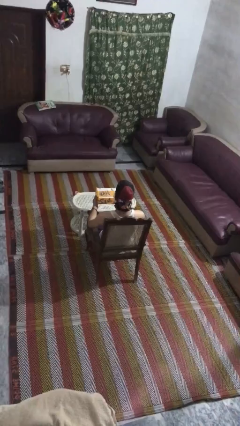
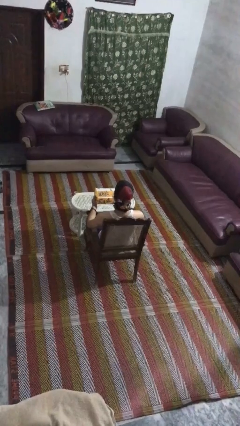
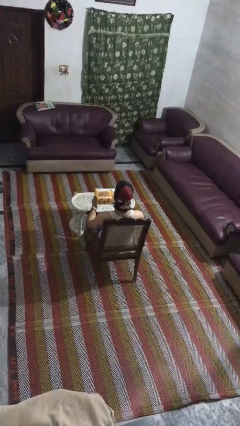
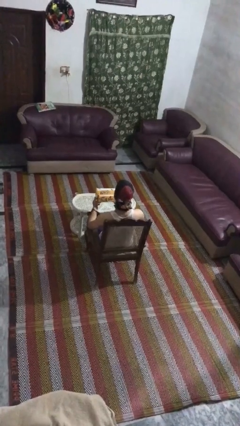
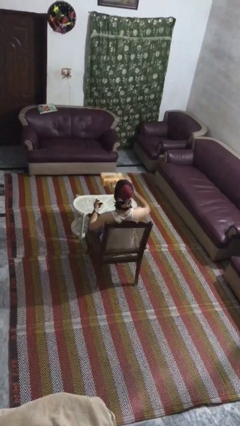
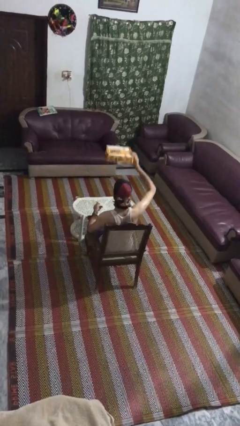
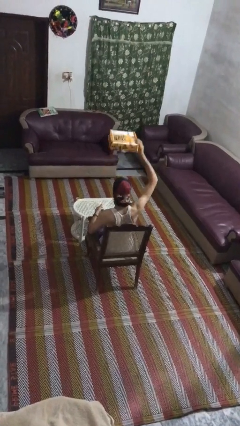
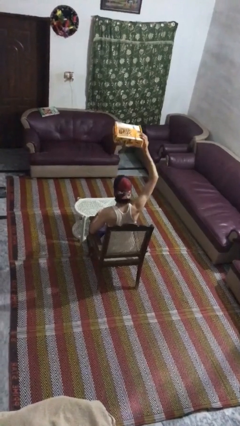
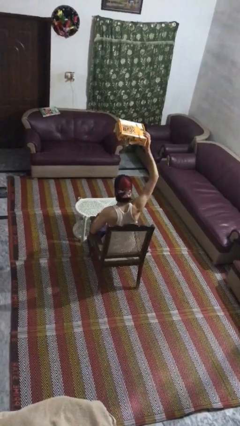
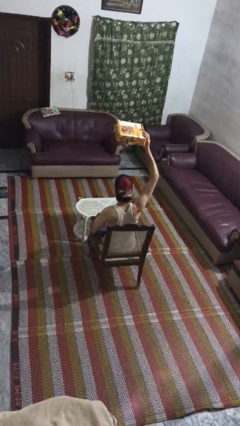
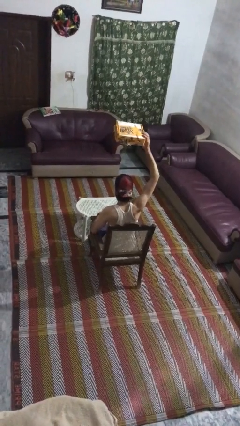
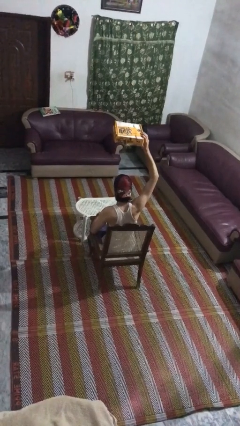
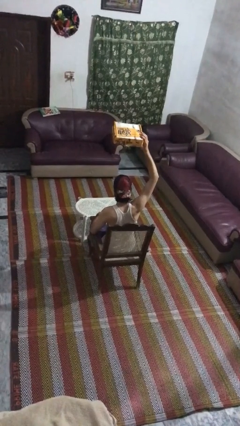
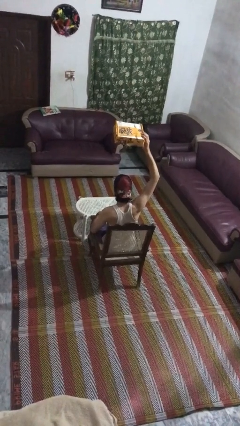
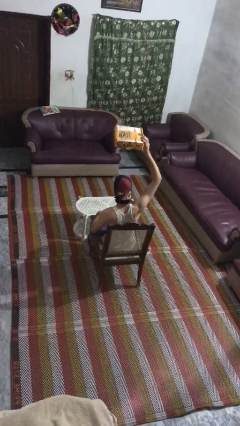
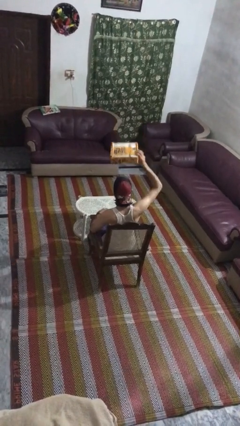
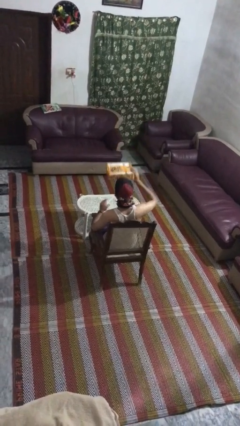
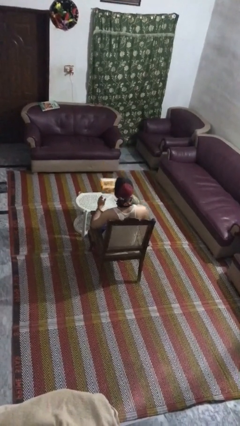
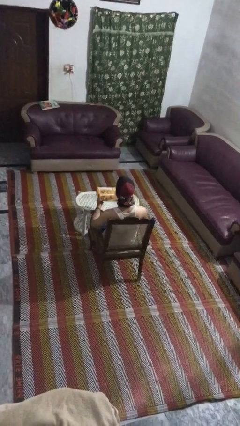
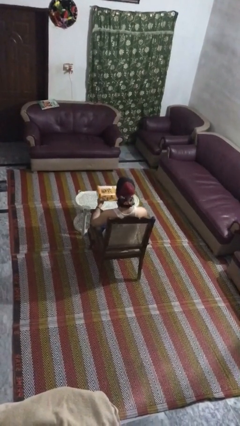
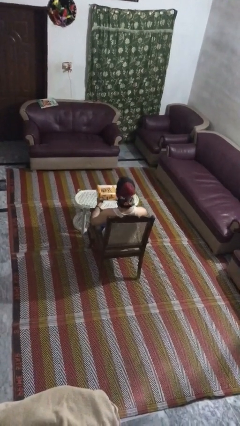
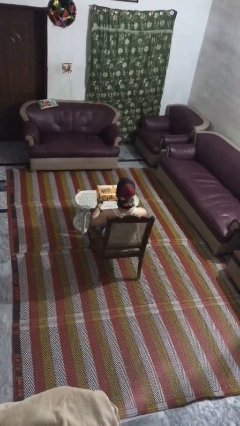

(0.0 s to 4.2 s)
person holds object above head

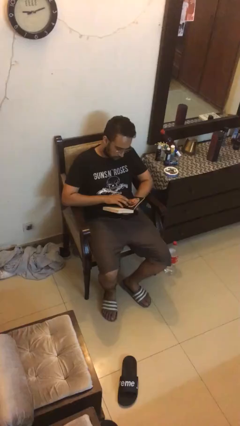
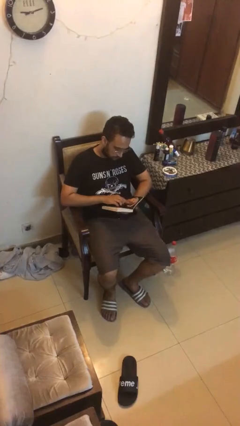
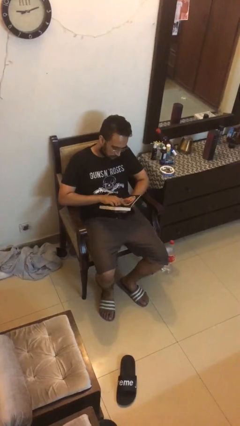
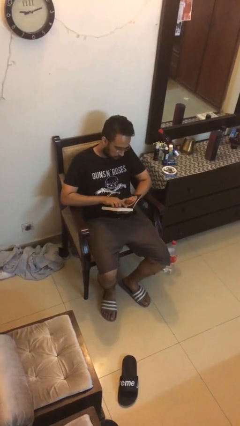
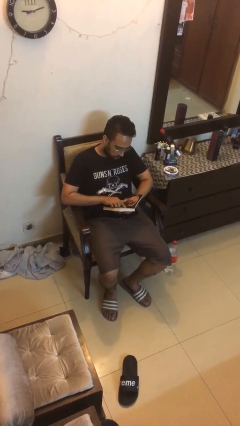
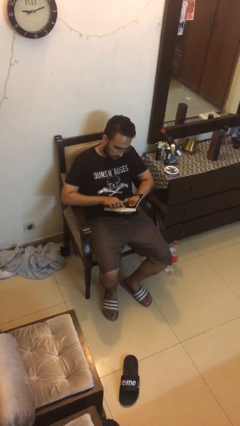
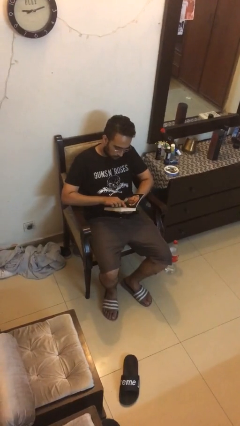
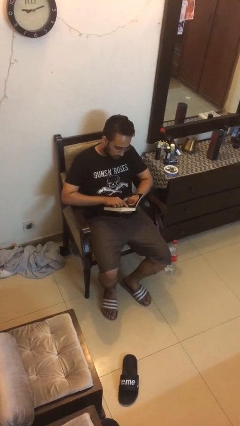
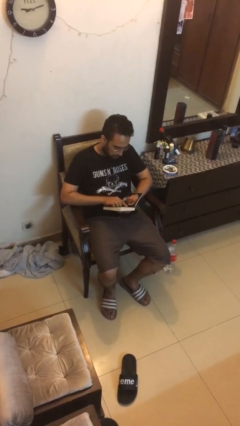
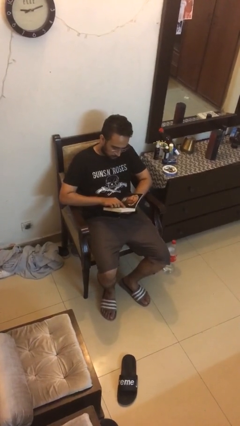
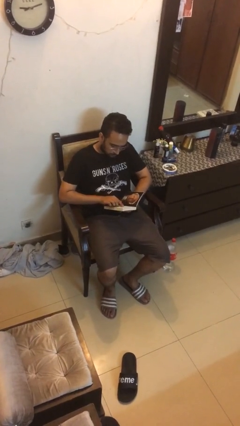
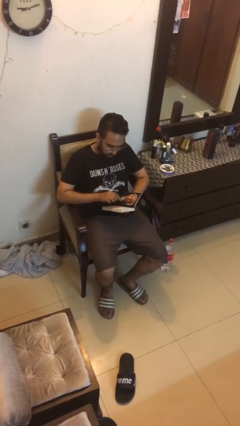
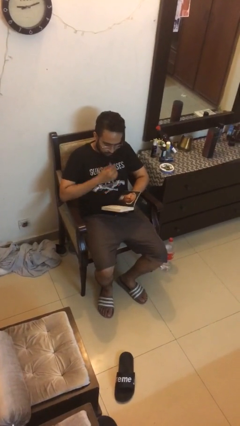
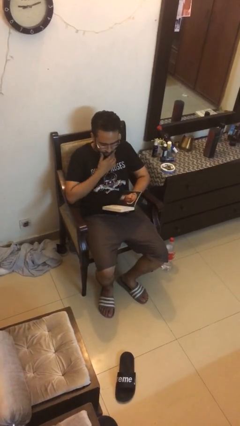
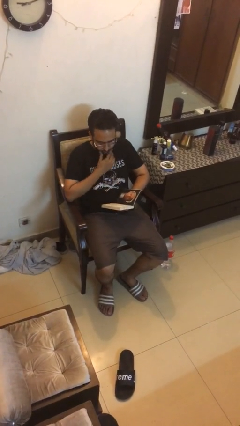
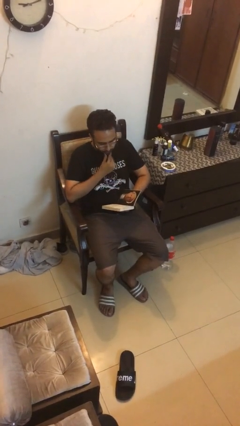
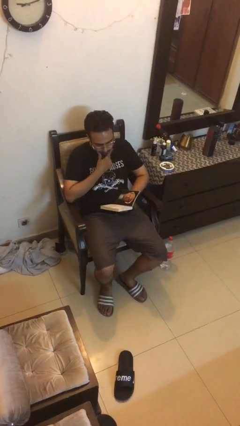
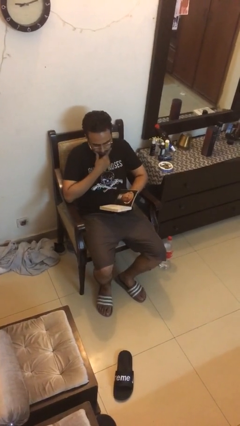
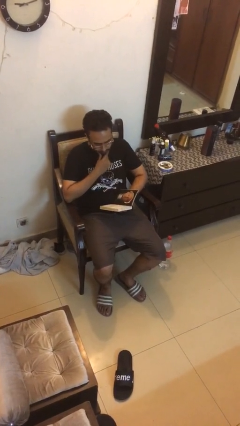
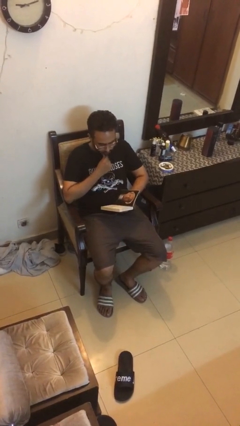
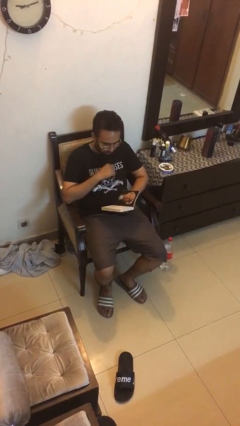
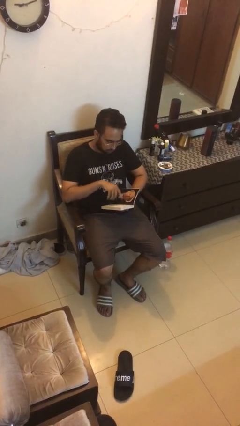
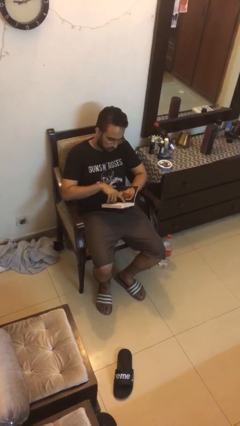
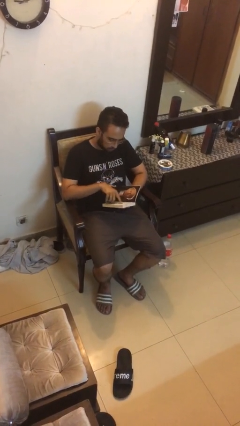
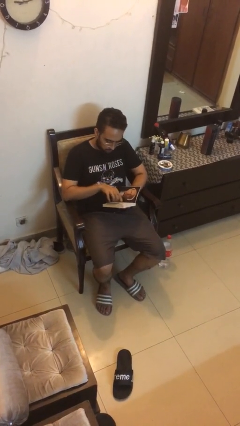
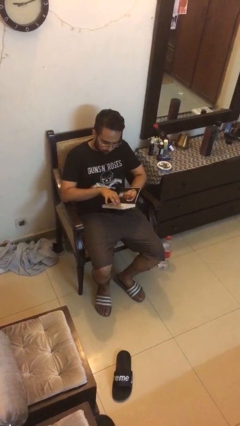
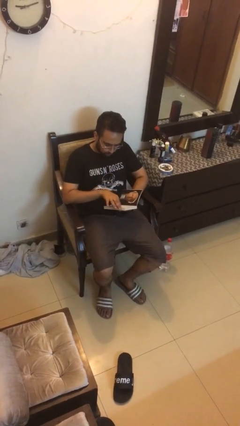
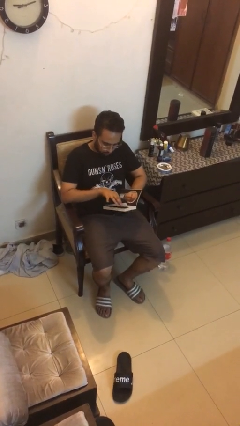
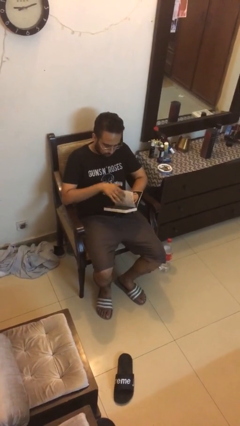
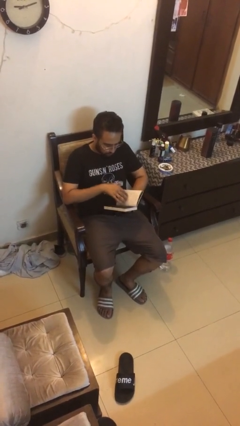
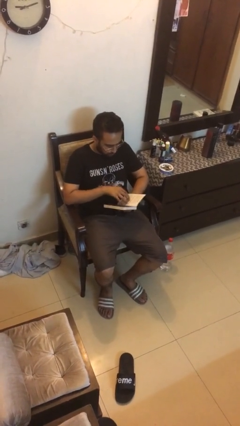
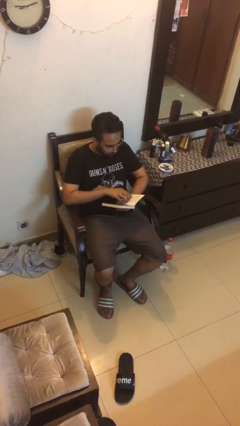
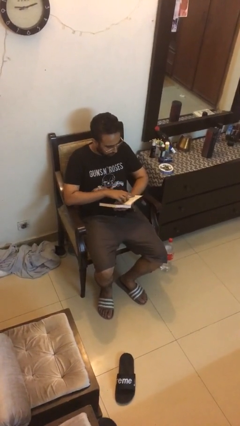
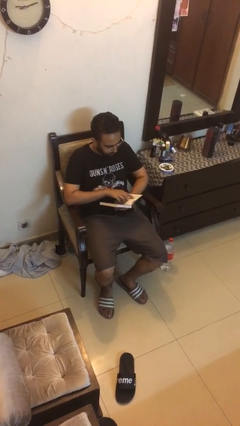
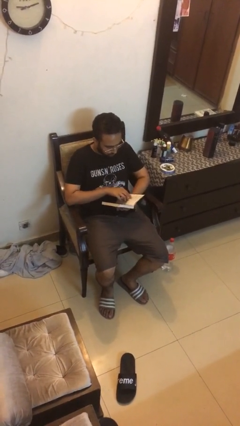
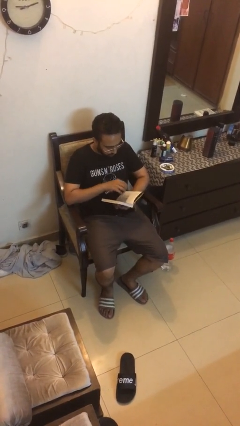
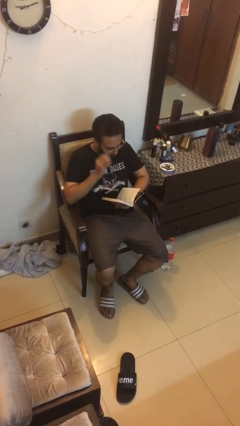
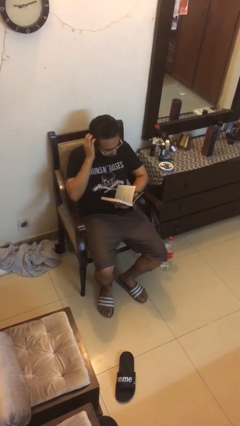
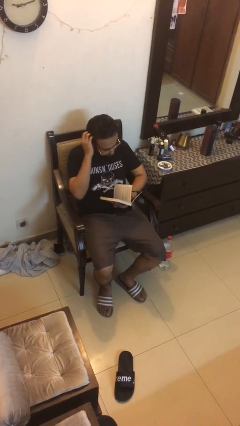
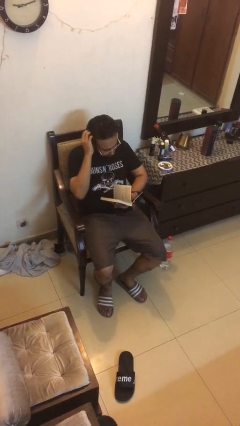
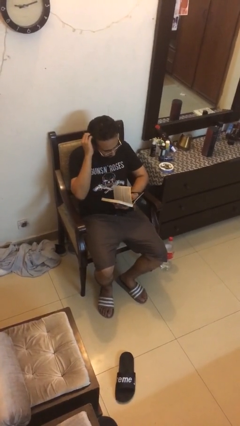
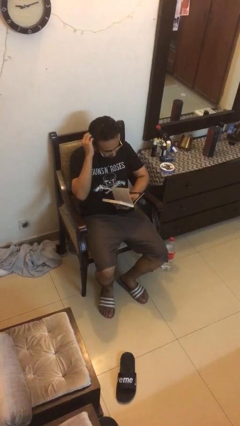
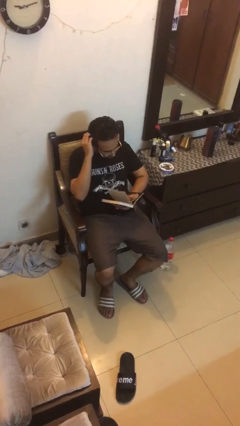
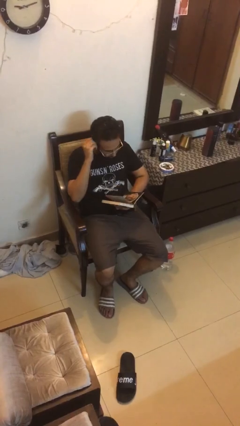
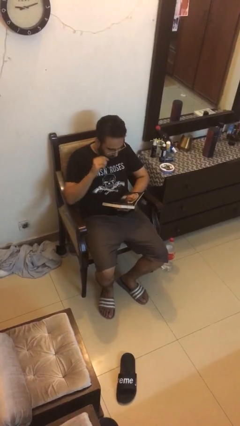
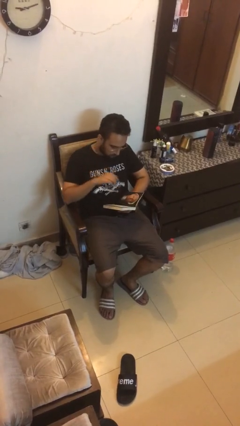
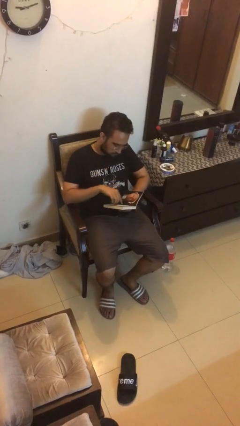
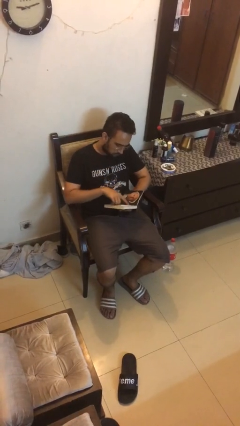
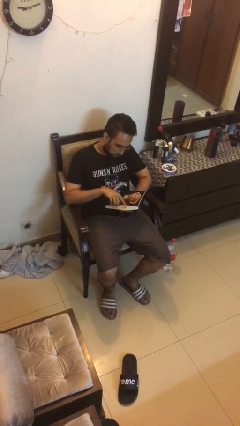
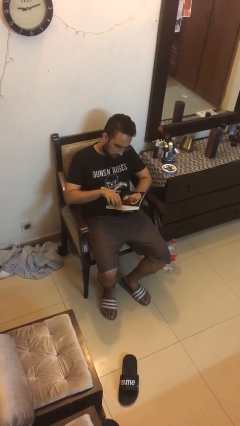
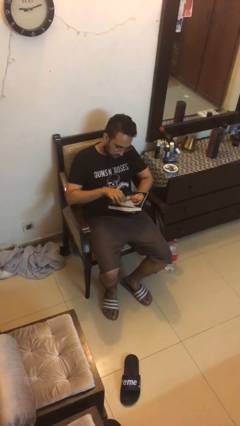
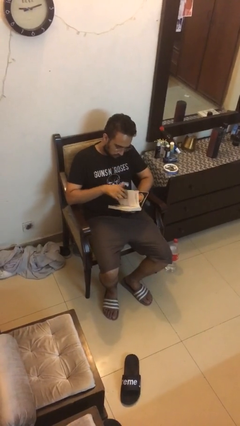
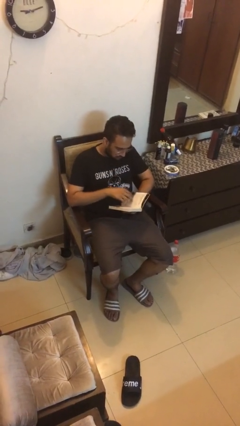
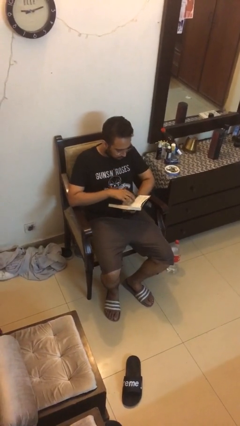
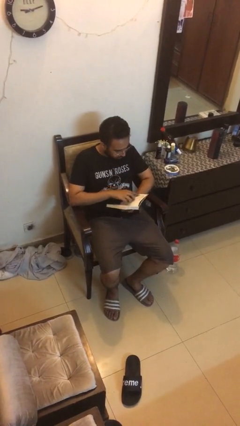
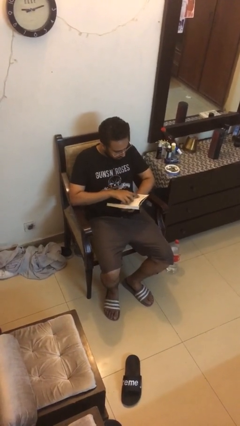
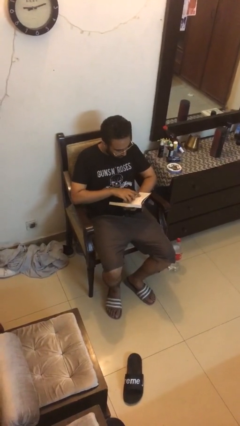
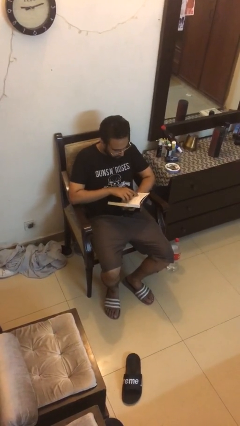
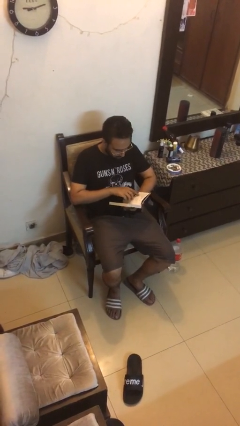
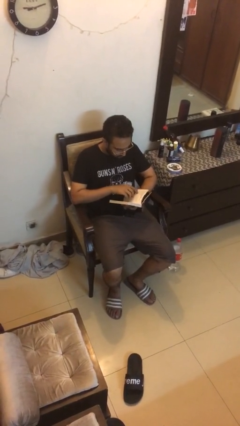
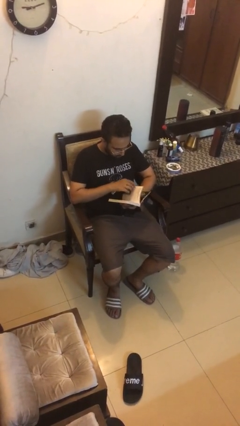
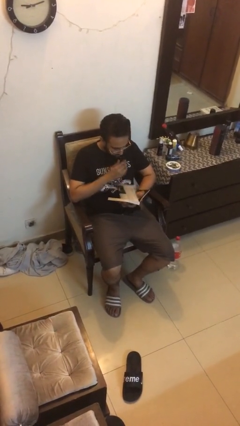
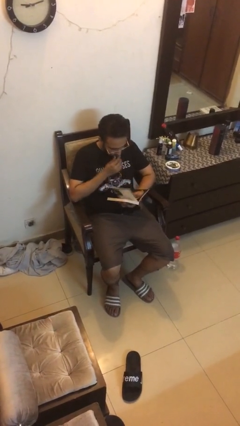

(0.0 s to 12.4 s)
person reads document

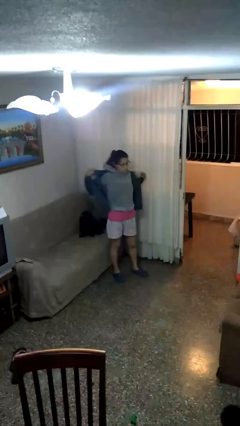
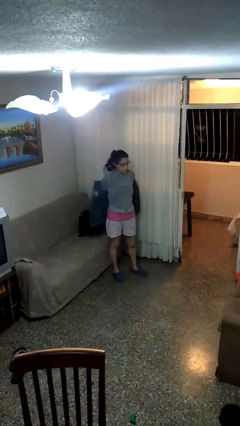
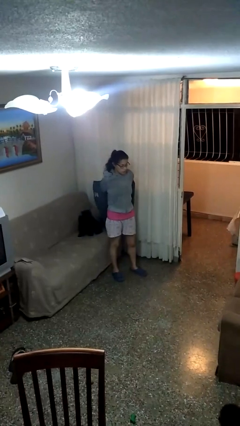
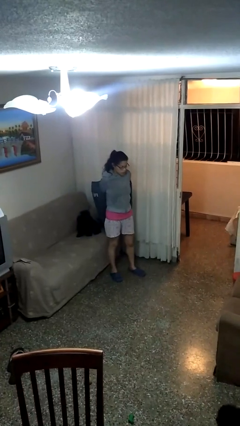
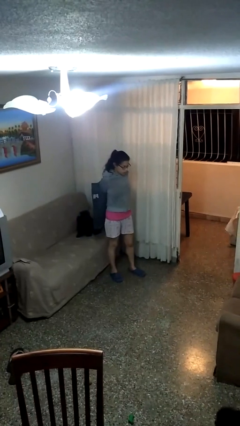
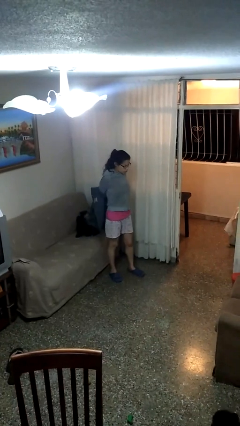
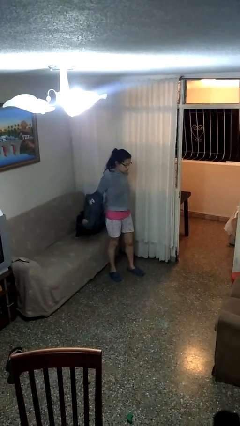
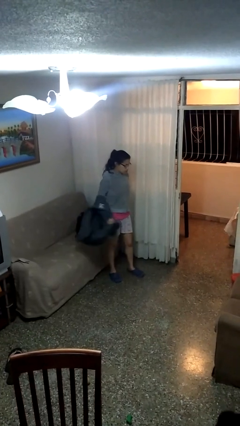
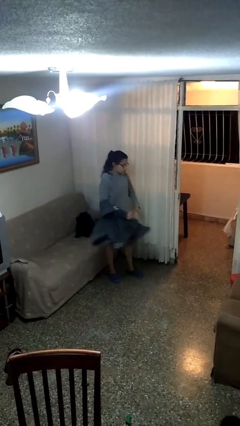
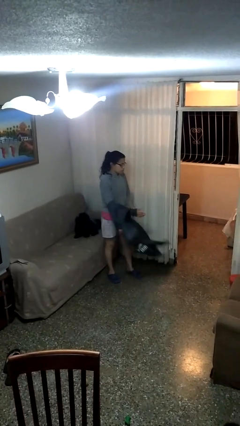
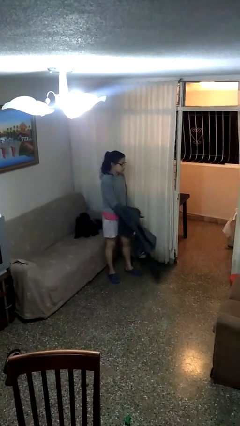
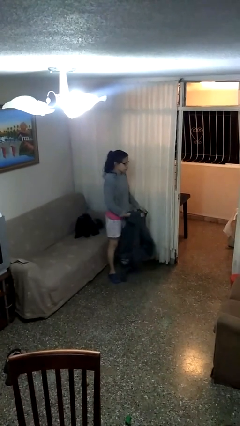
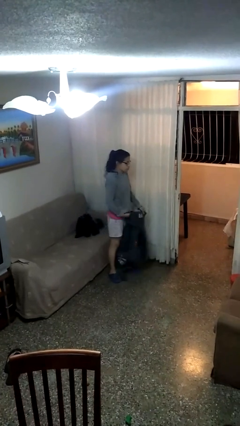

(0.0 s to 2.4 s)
person takes off jacket
